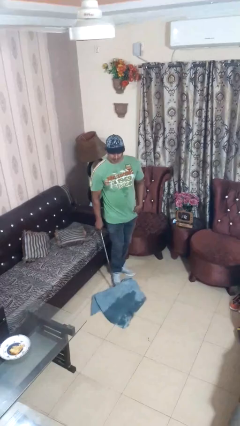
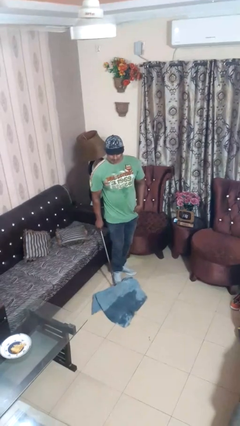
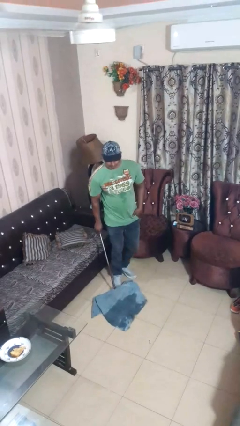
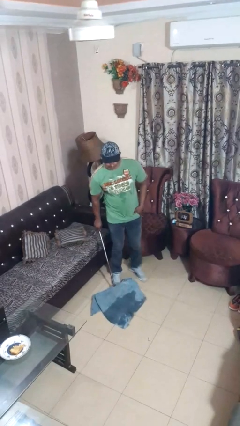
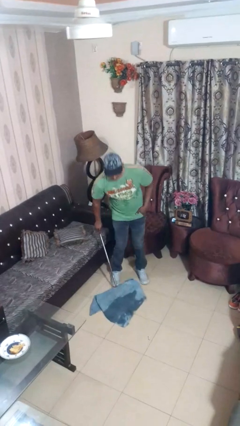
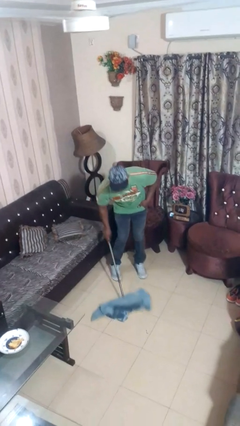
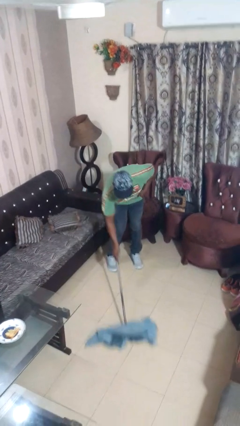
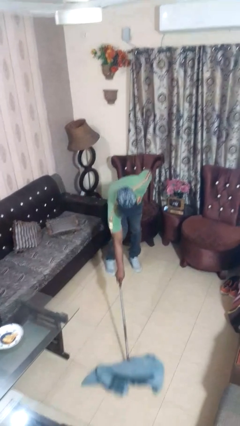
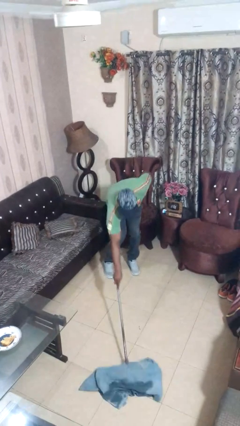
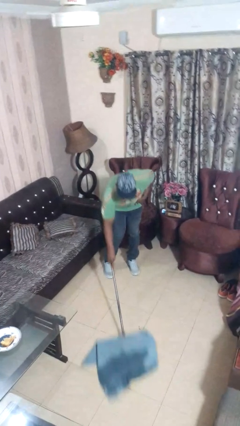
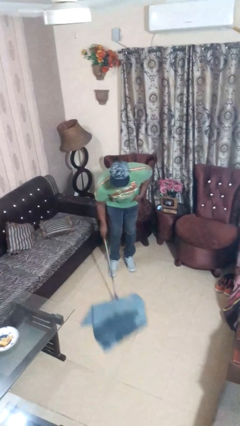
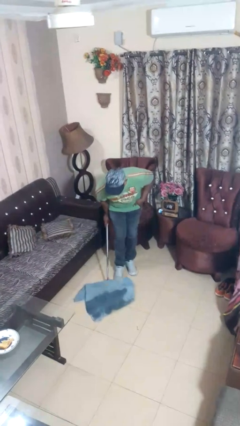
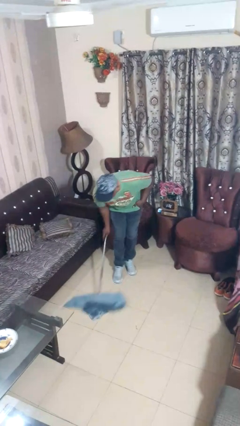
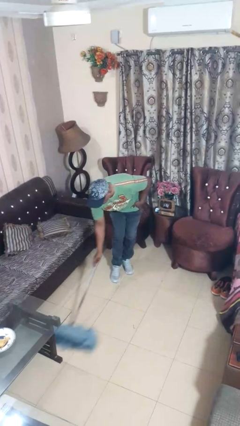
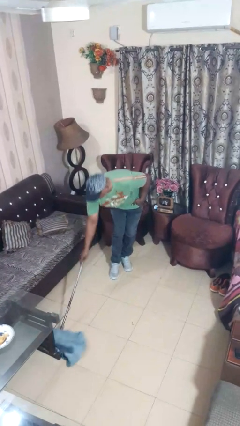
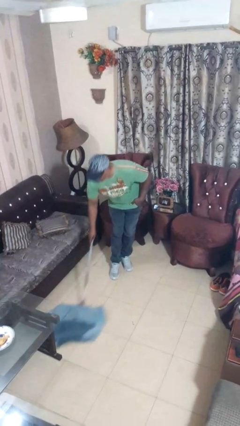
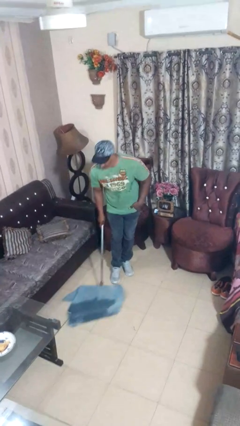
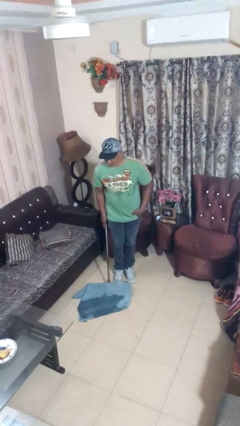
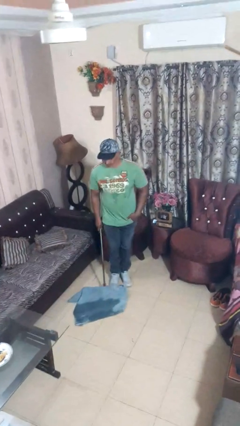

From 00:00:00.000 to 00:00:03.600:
person mops

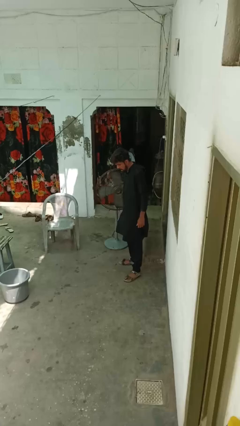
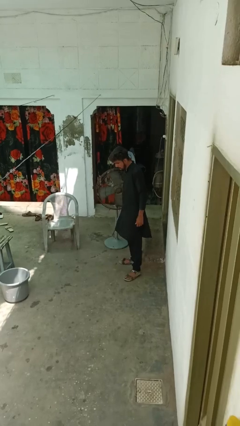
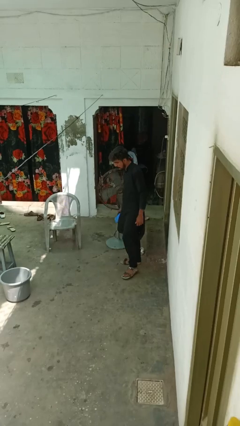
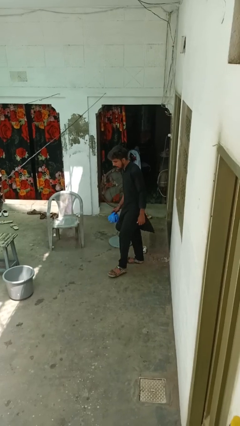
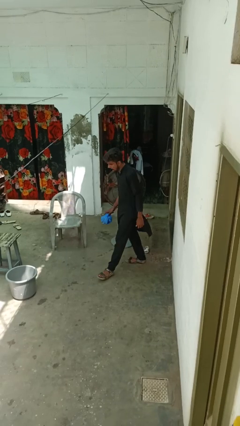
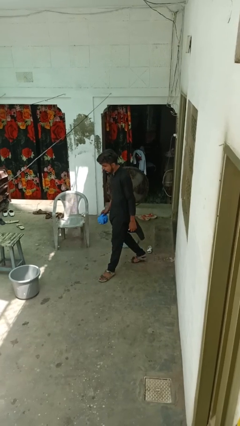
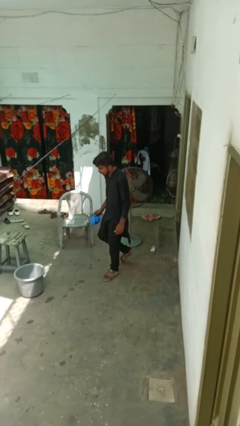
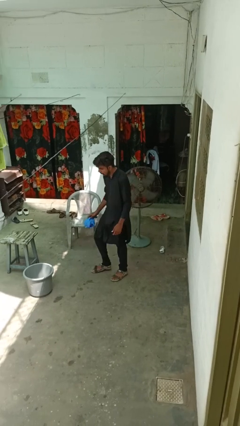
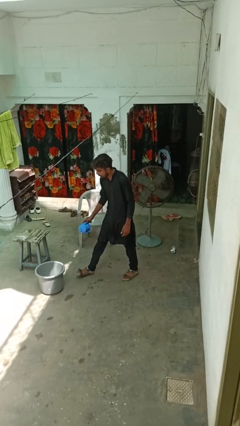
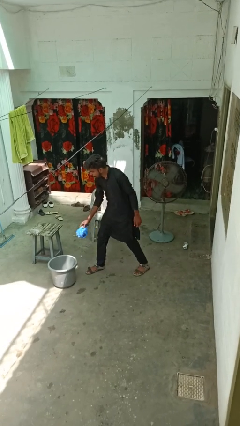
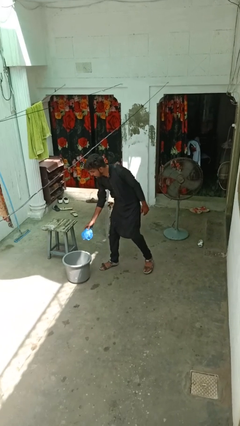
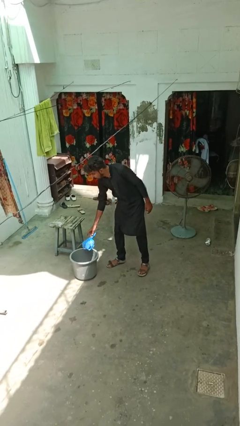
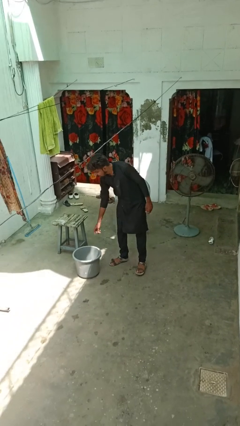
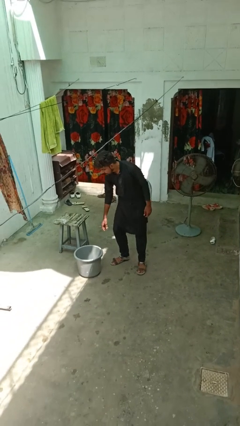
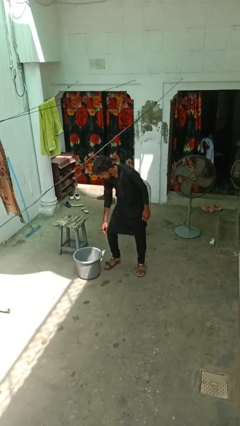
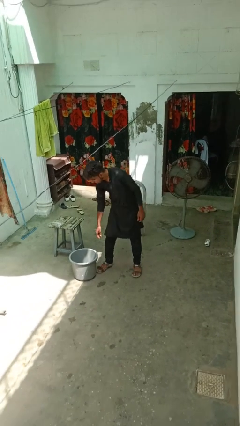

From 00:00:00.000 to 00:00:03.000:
person discards trash

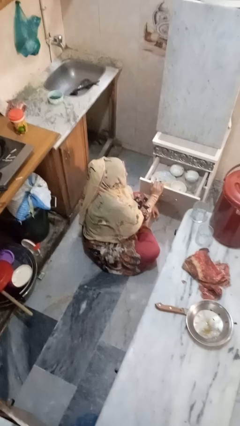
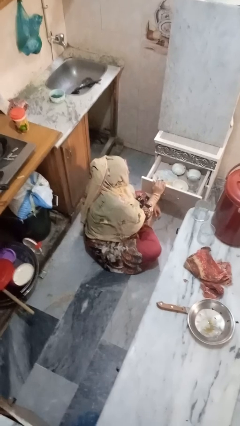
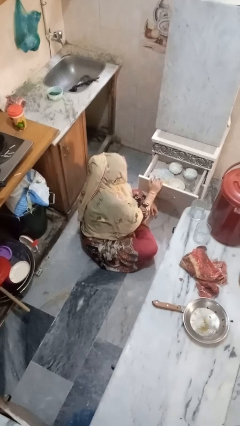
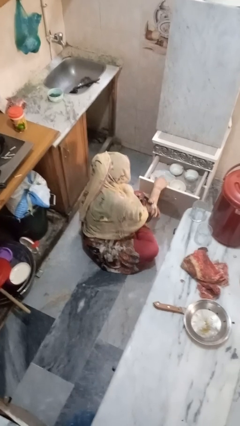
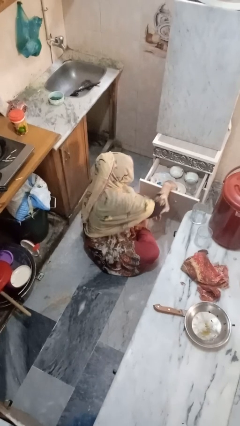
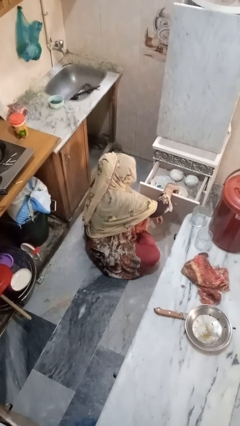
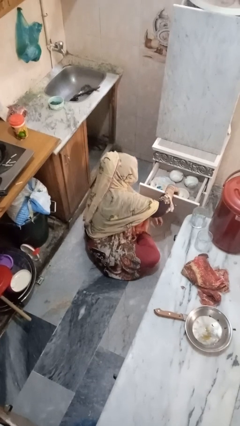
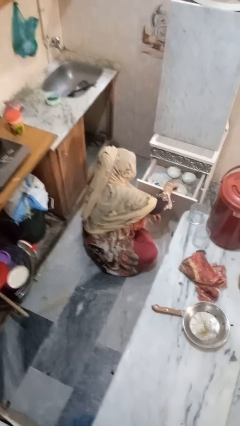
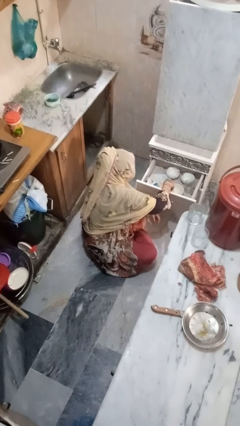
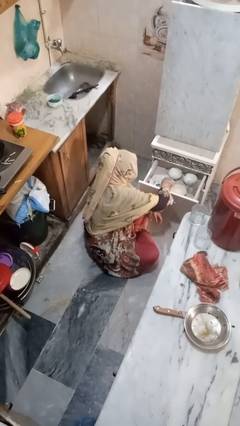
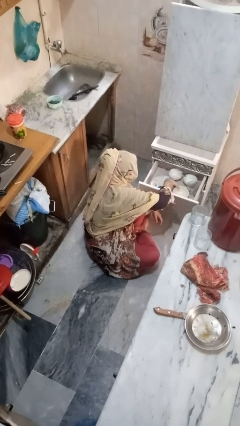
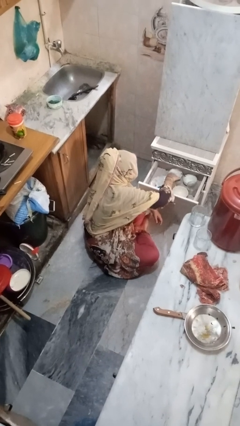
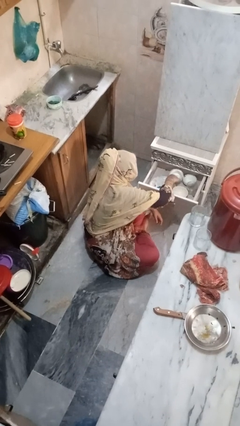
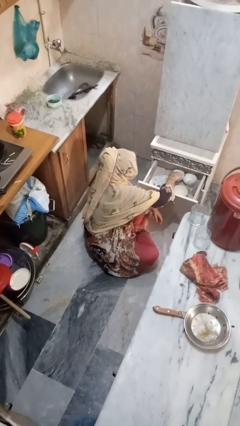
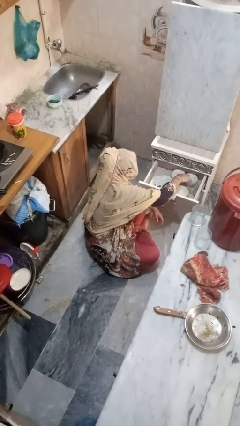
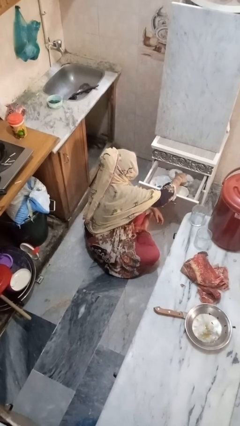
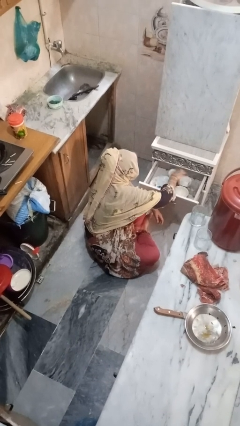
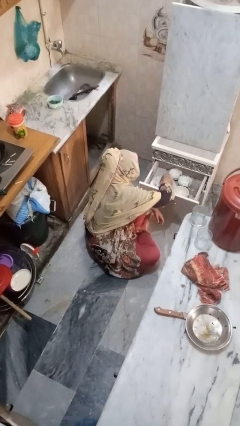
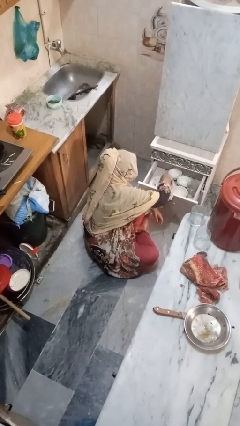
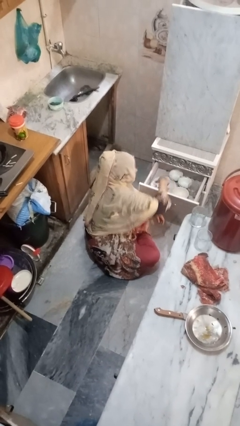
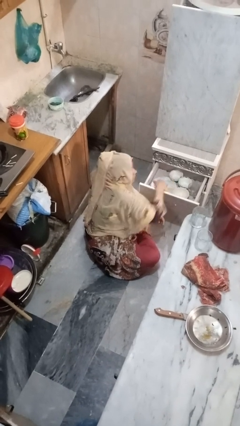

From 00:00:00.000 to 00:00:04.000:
person searches in kitchen drawer

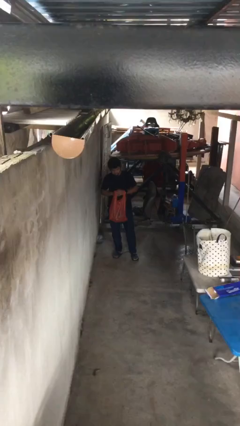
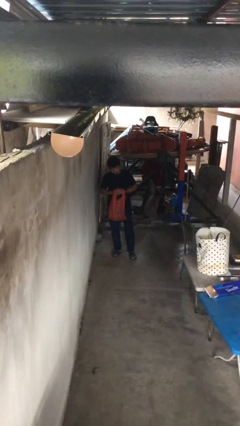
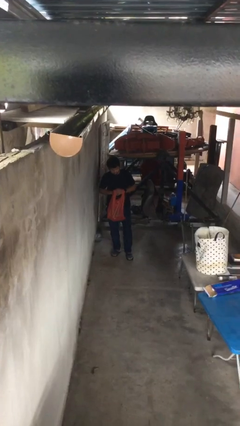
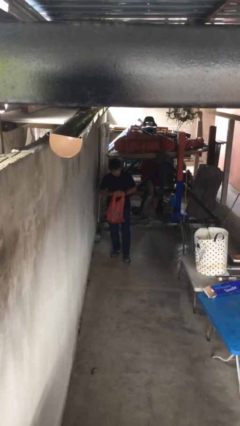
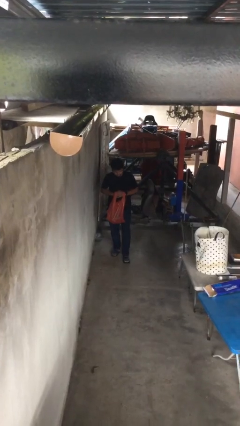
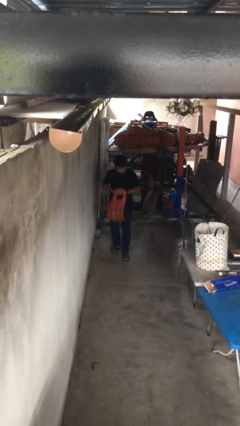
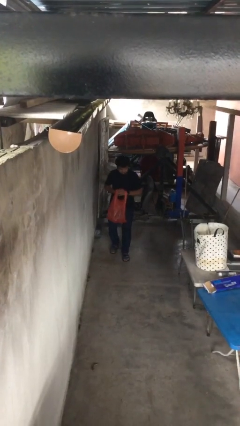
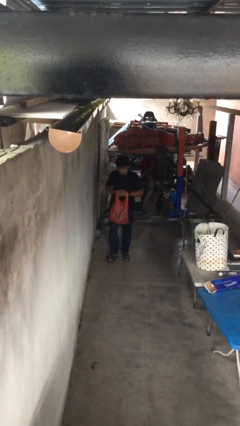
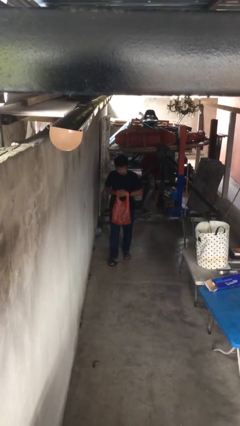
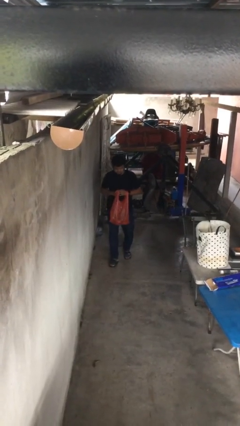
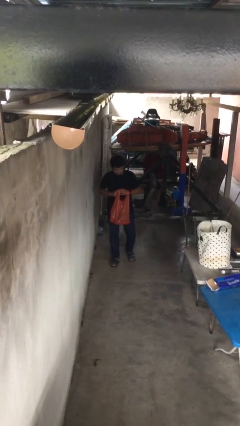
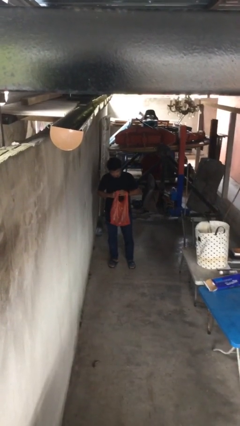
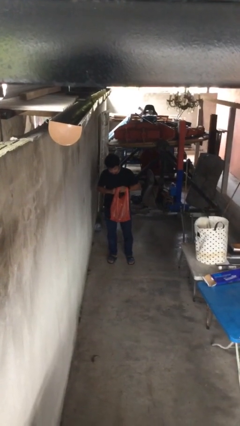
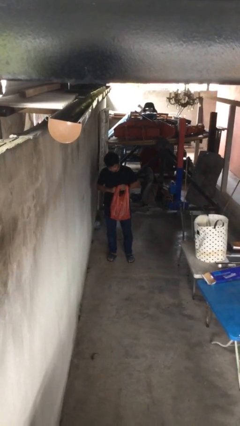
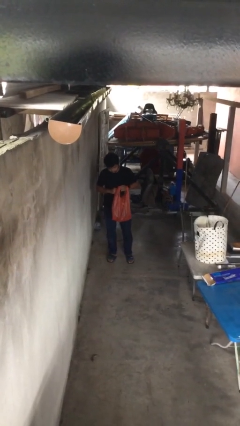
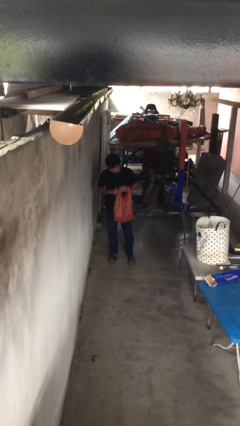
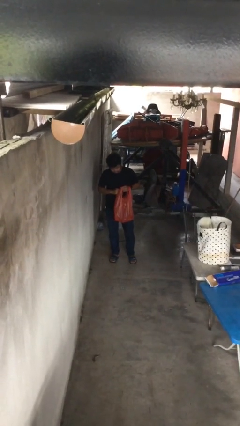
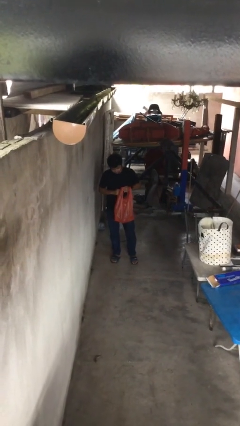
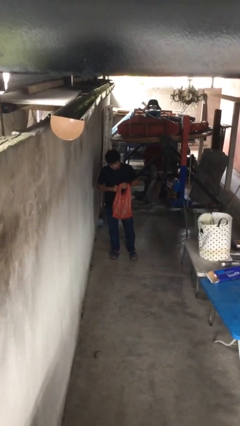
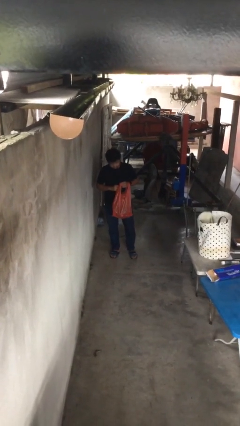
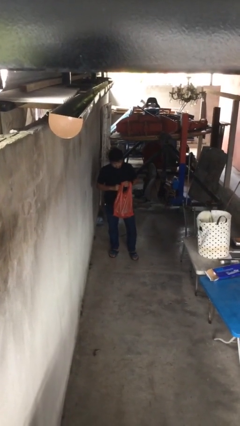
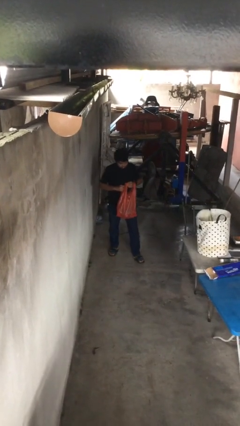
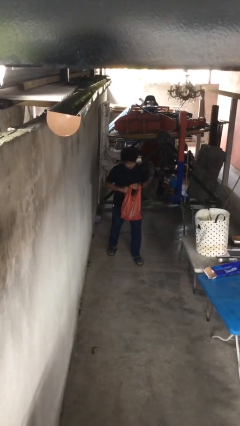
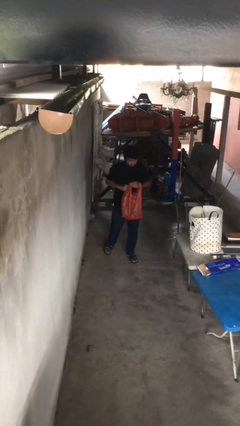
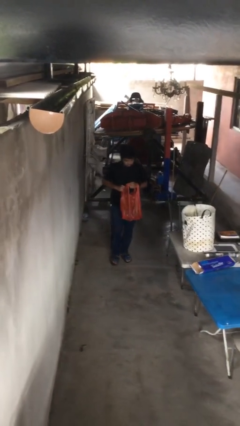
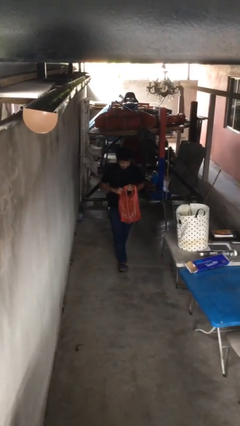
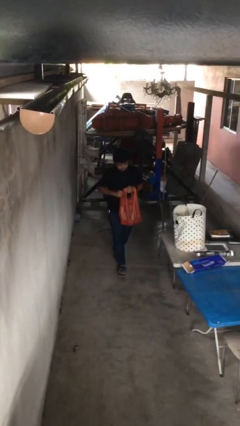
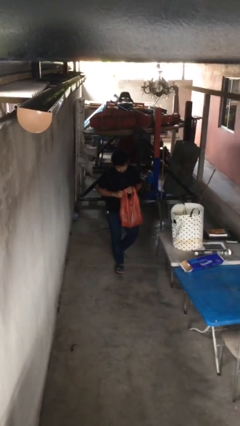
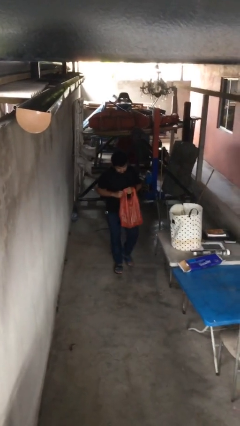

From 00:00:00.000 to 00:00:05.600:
person carries groceries

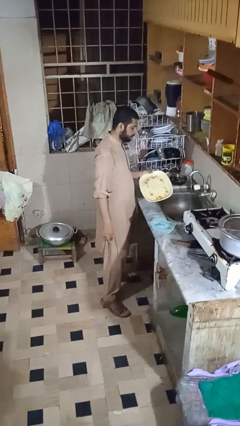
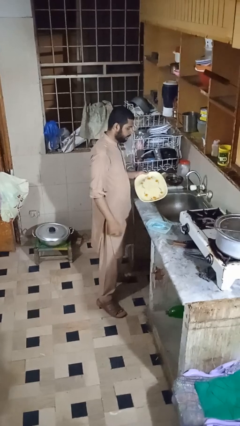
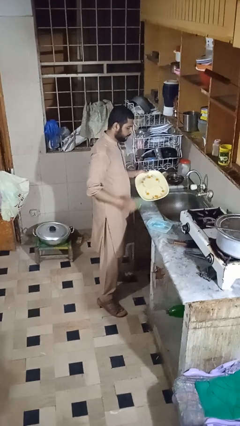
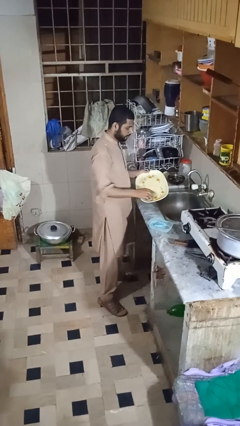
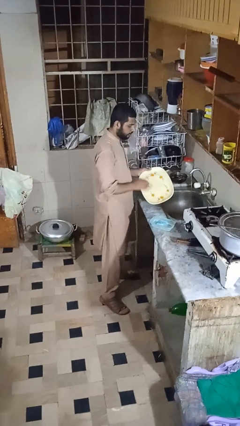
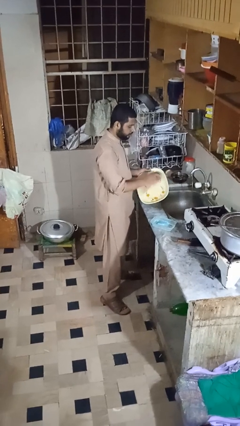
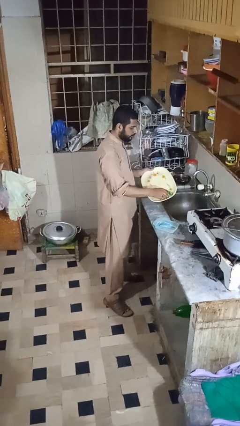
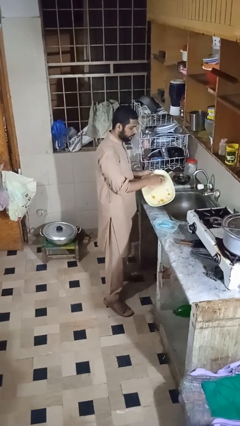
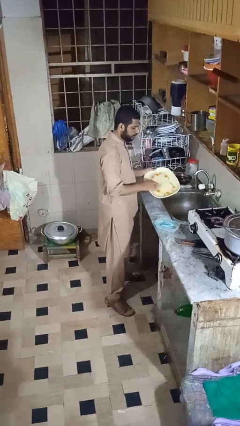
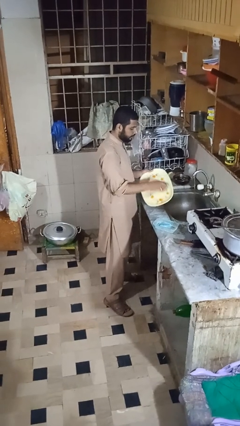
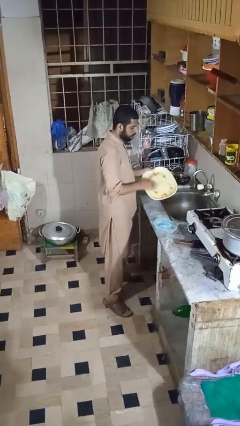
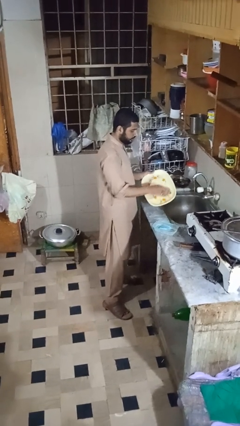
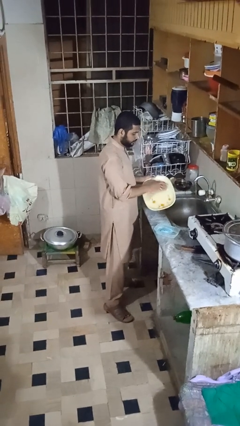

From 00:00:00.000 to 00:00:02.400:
person washes dish
